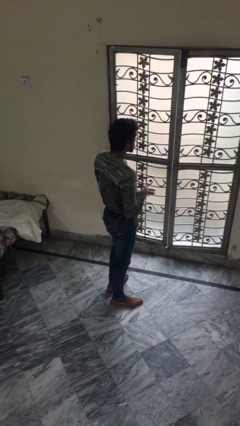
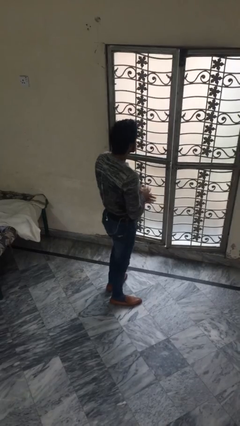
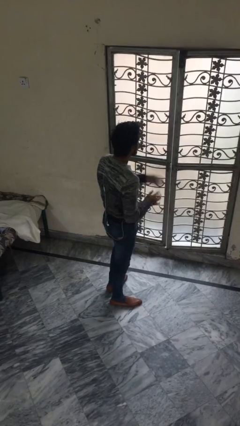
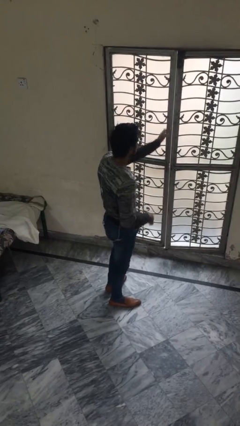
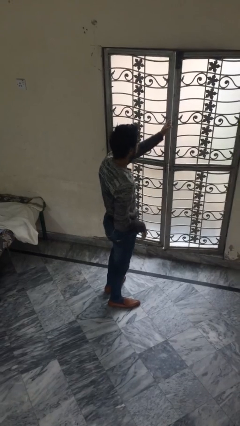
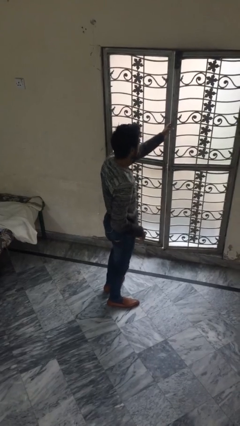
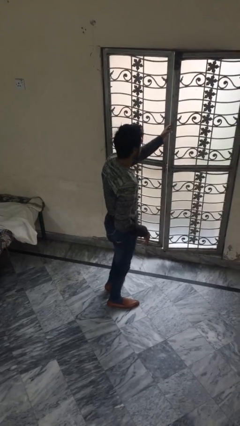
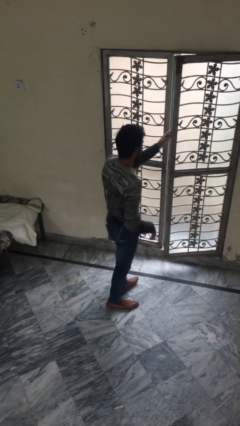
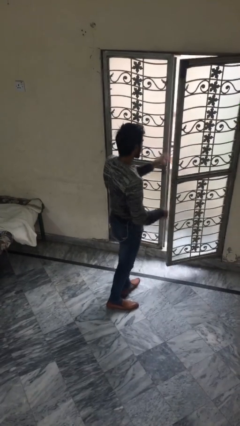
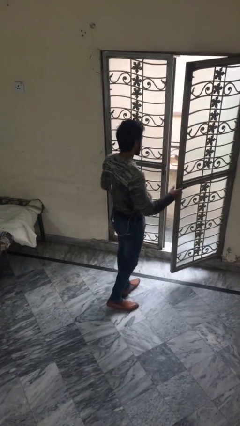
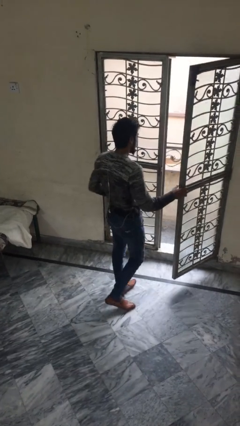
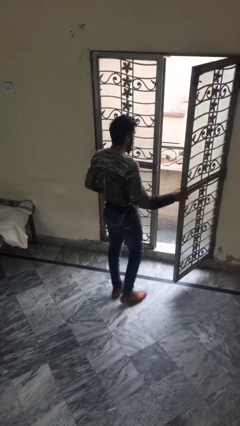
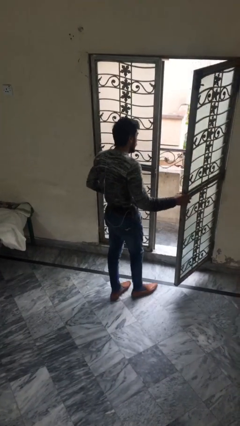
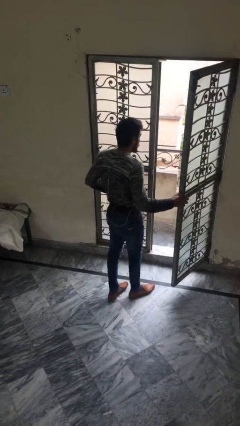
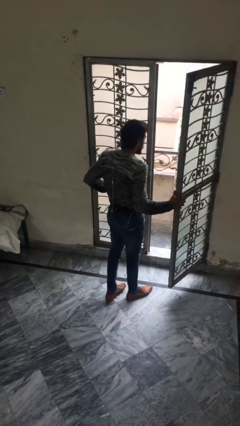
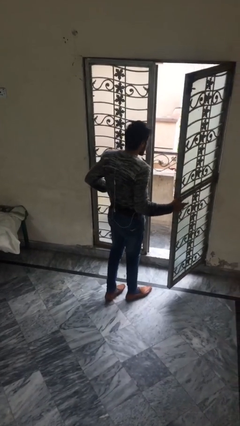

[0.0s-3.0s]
person opens facility door

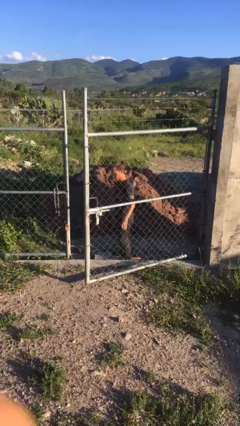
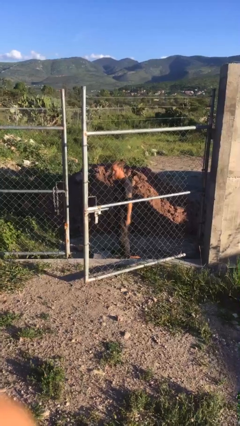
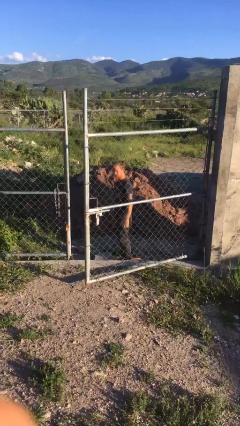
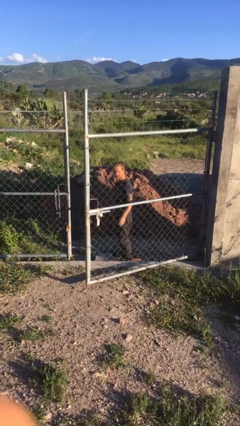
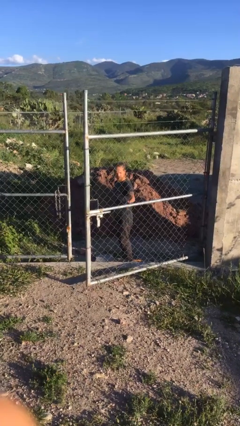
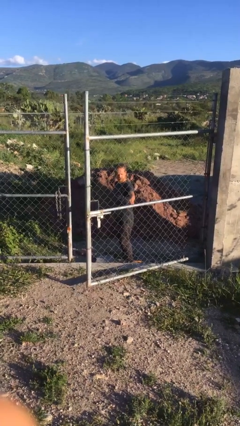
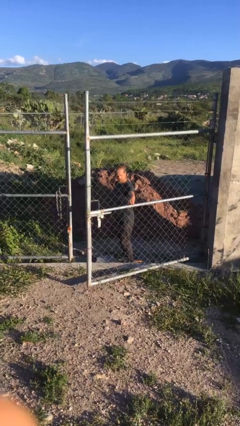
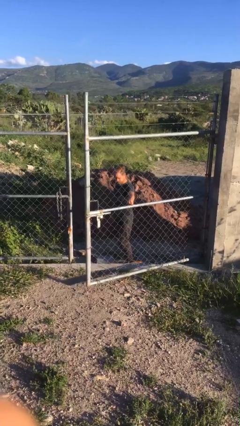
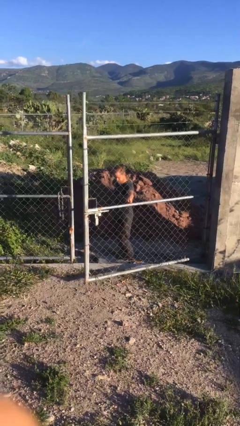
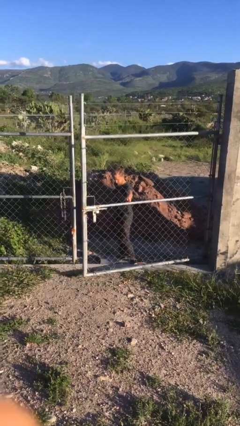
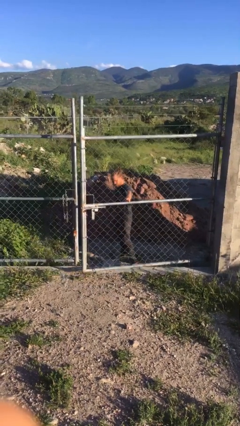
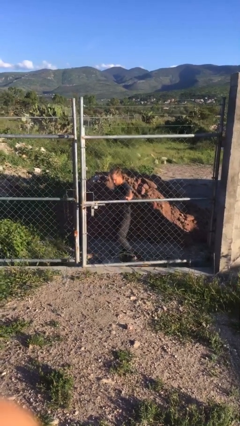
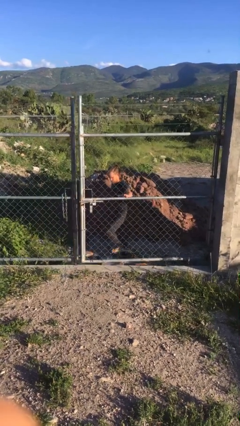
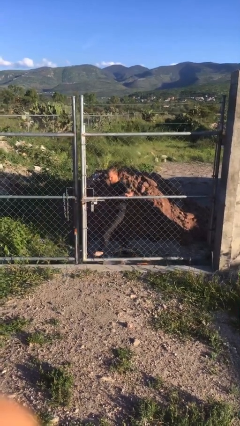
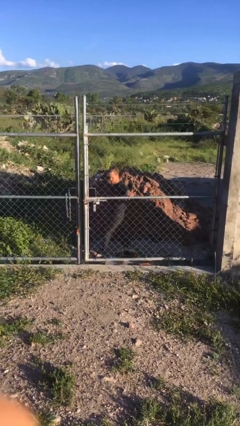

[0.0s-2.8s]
person closes gate

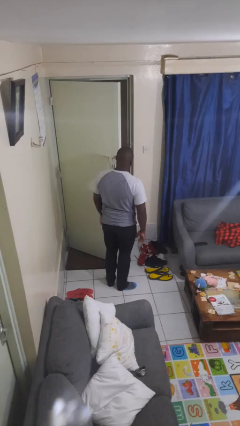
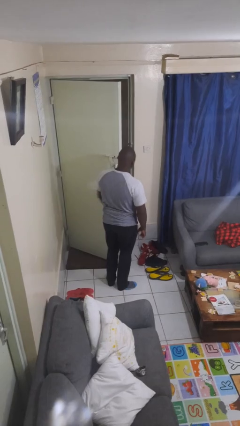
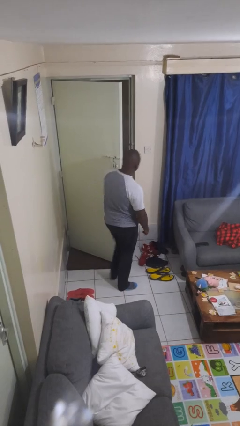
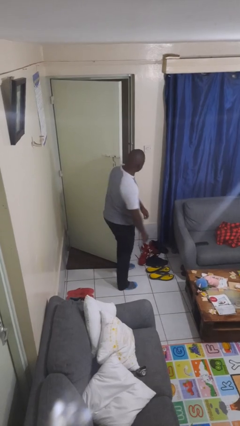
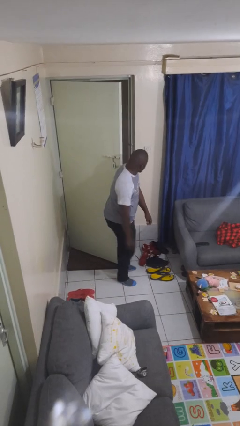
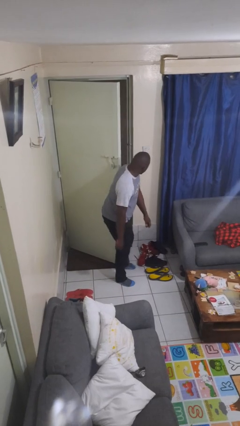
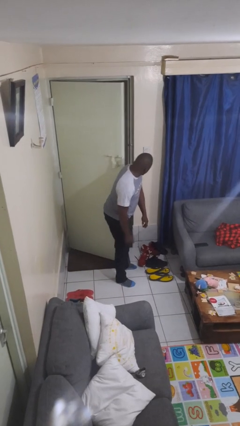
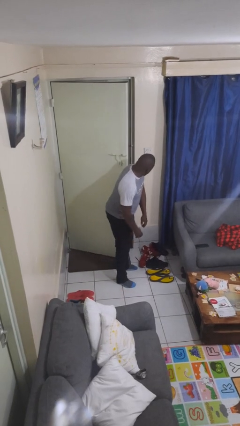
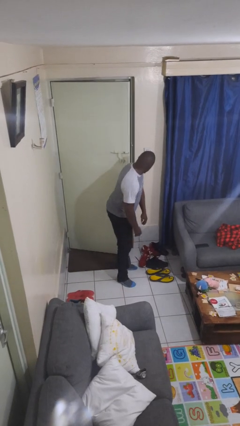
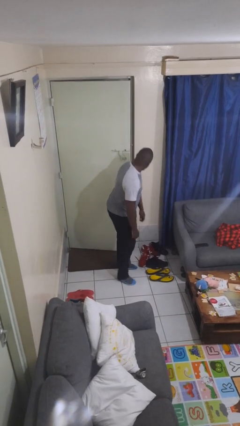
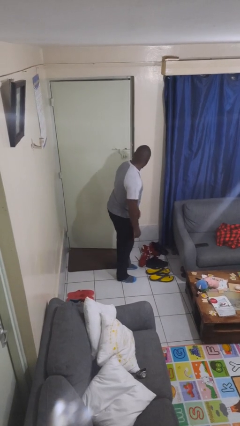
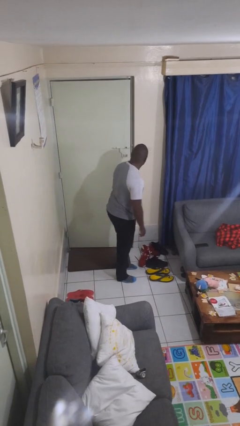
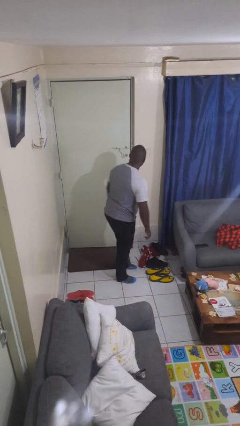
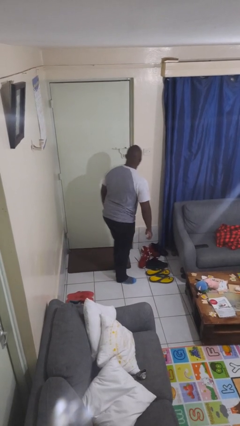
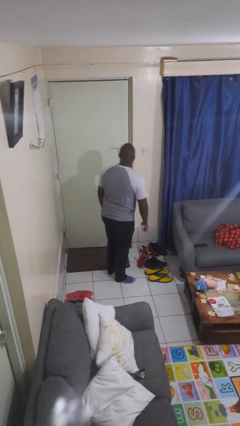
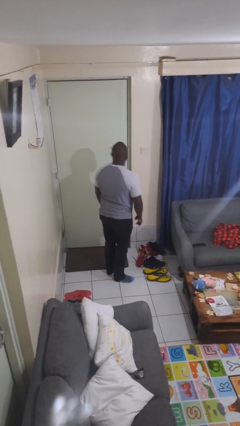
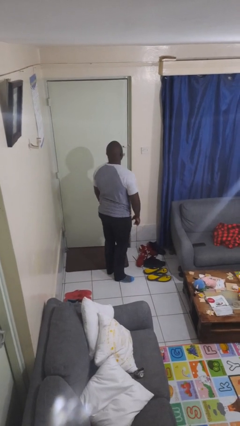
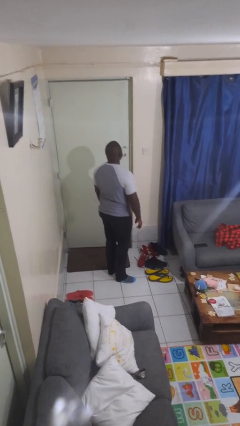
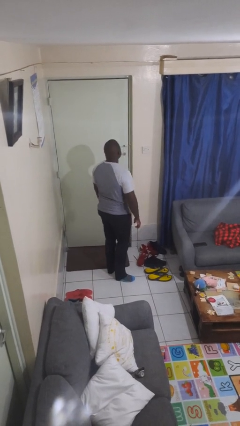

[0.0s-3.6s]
person closes door with hip

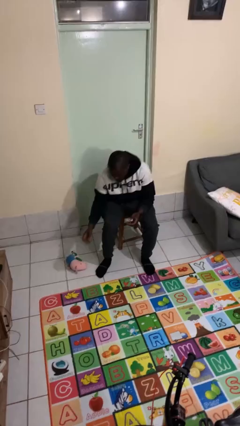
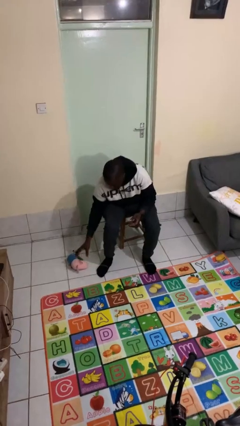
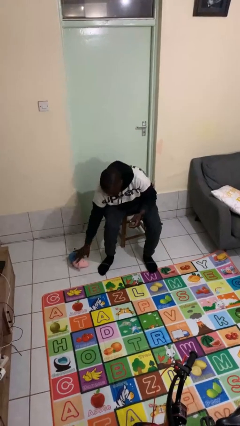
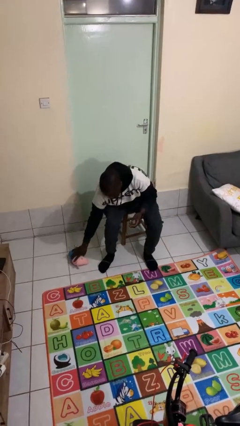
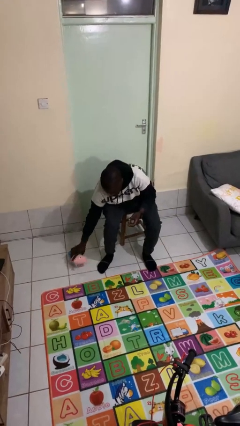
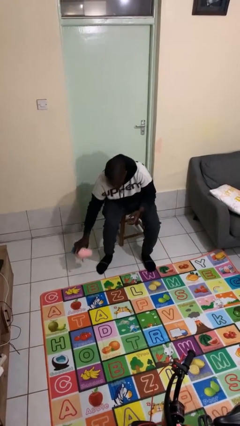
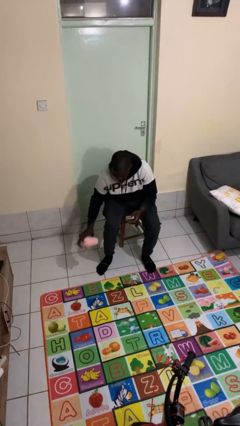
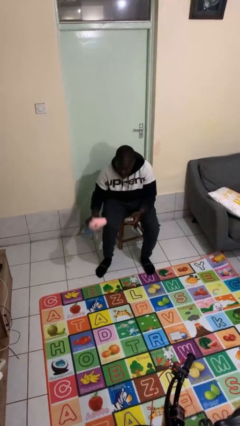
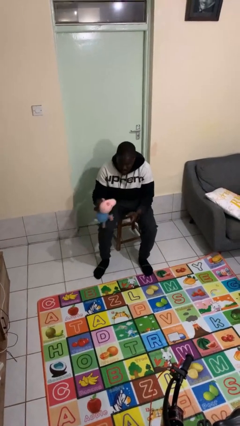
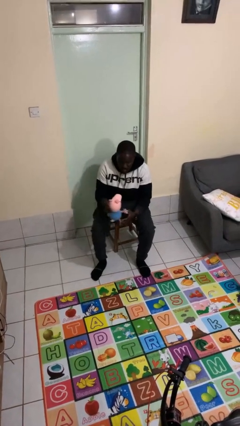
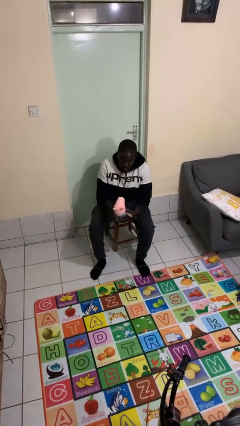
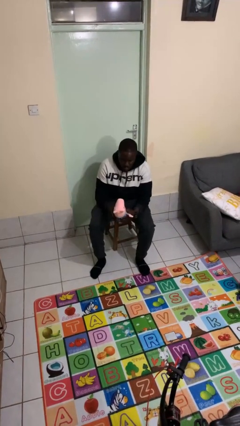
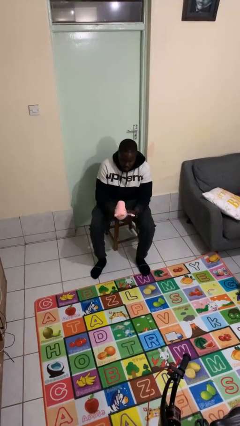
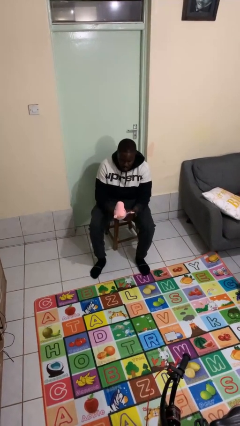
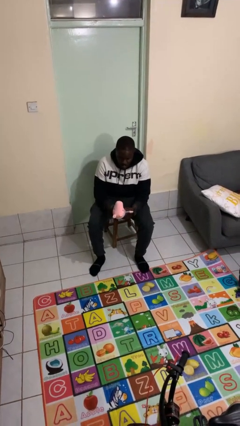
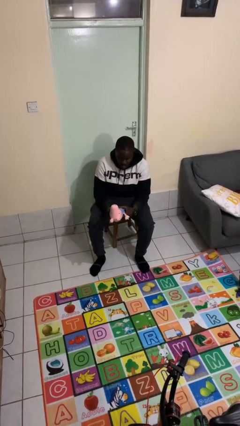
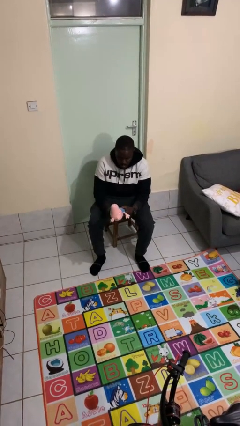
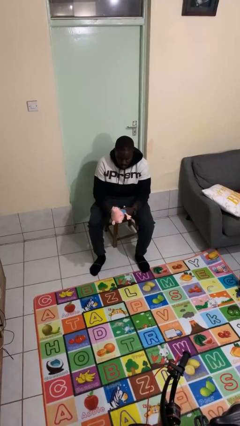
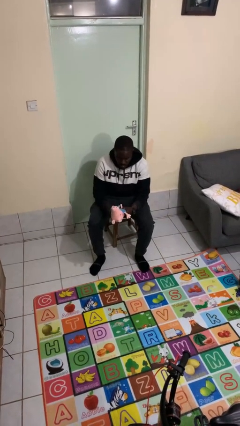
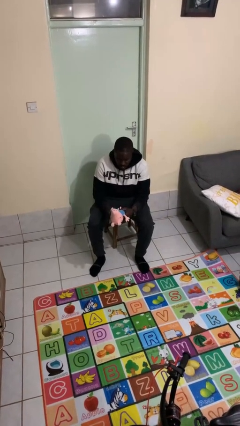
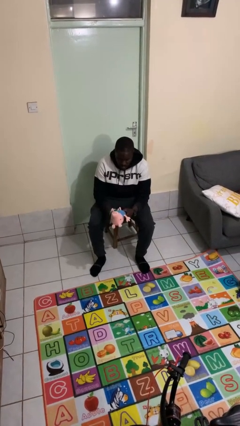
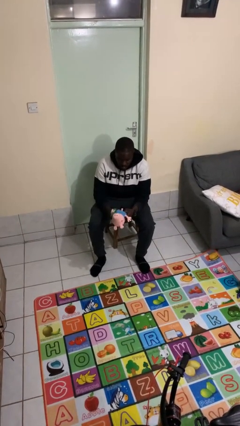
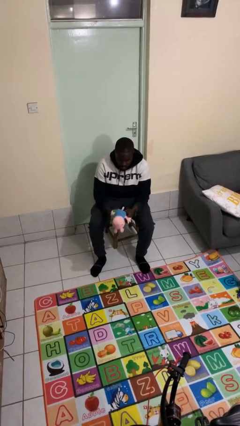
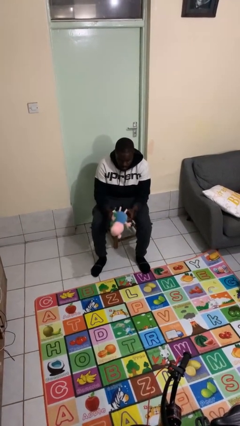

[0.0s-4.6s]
person picks up object from floor

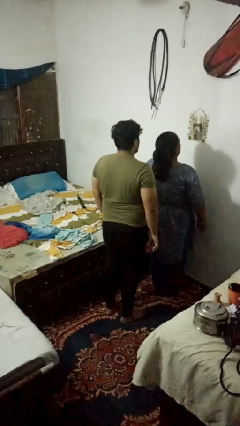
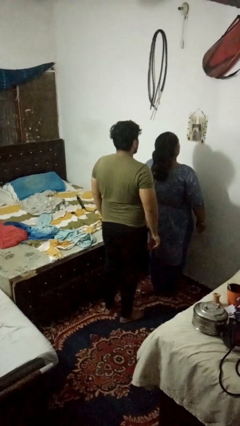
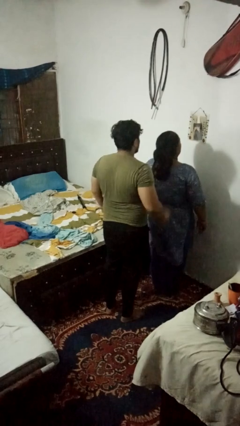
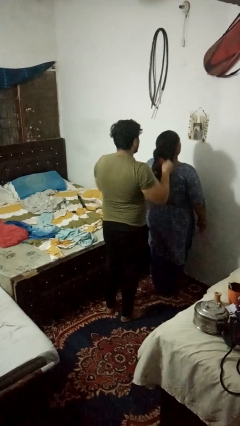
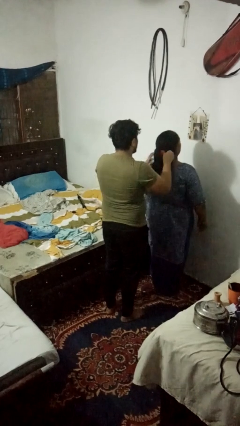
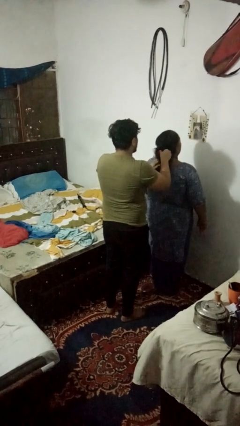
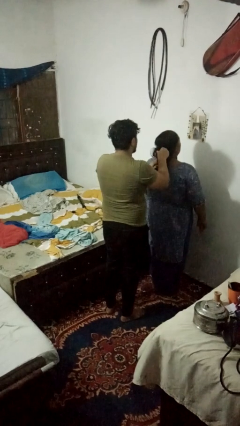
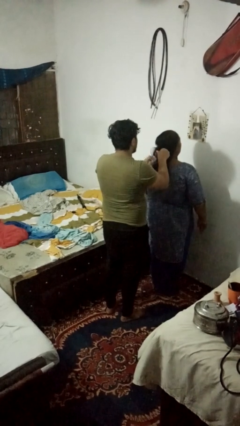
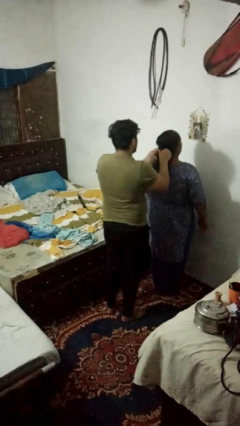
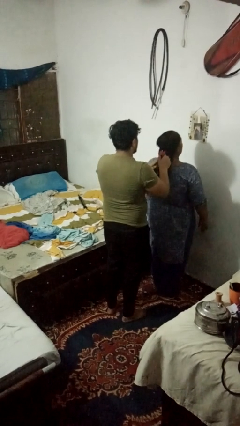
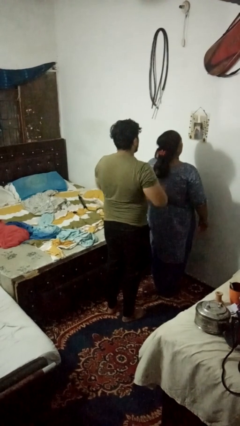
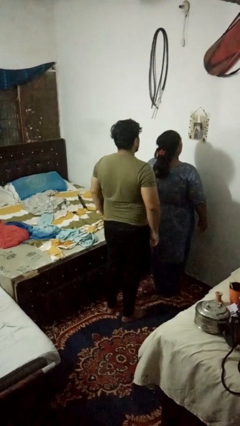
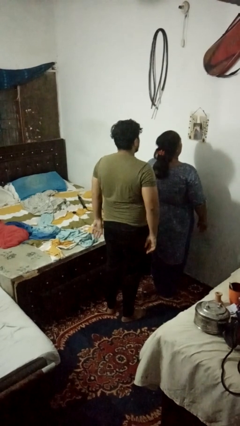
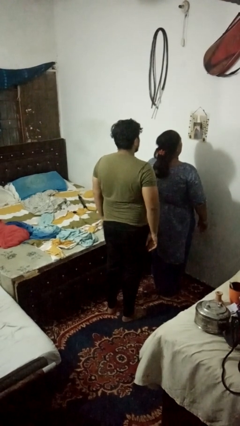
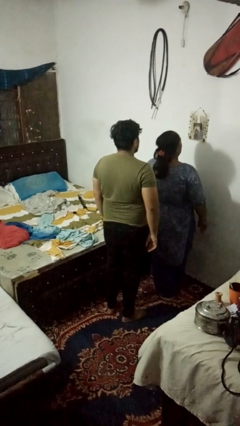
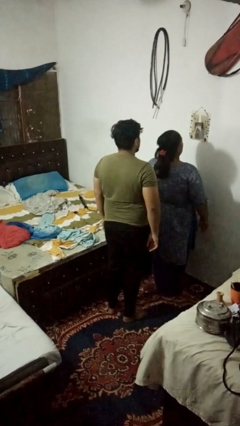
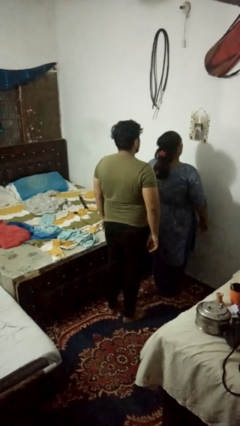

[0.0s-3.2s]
person braids hair of person

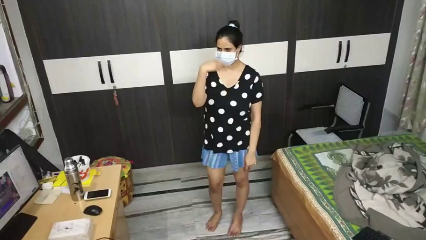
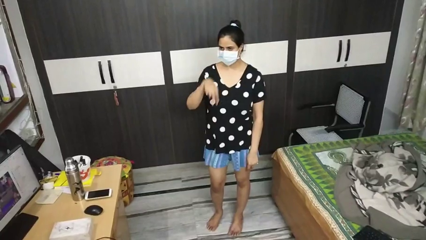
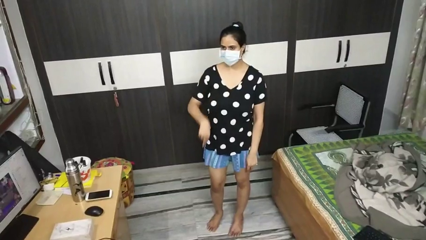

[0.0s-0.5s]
person gestures watch closely
